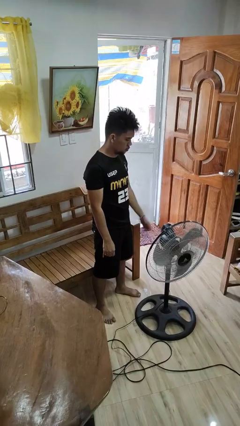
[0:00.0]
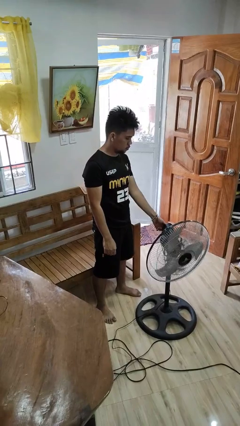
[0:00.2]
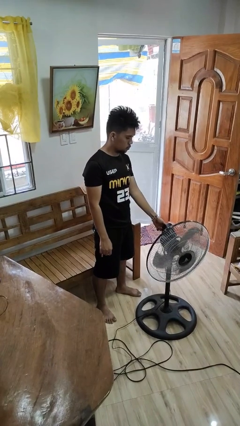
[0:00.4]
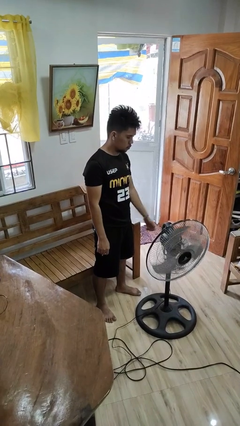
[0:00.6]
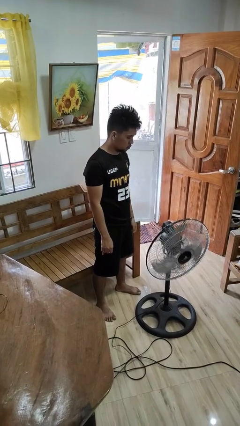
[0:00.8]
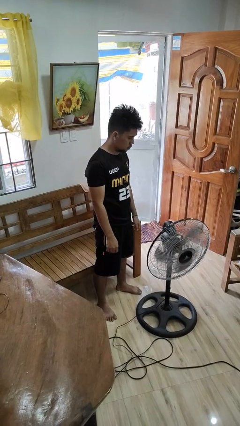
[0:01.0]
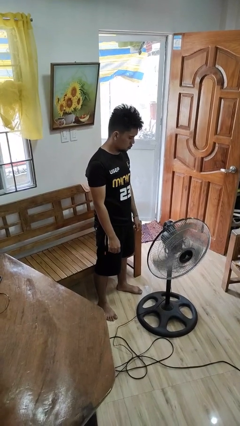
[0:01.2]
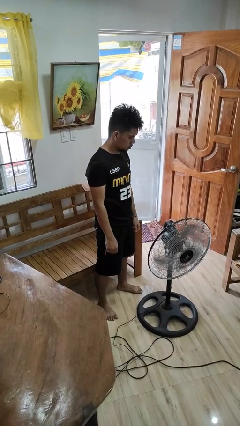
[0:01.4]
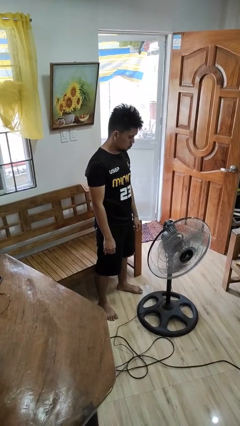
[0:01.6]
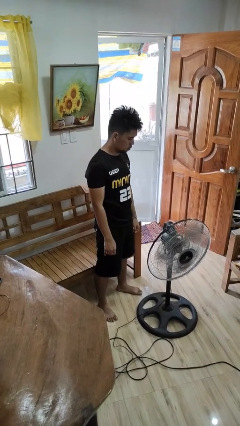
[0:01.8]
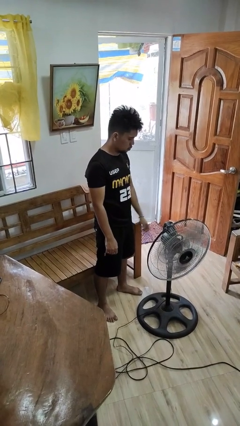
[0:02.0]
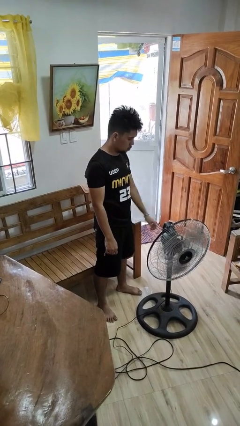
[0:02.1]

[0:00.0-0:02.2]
person turns on fan

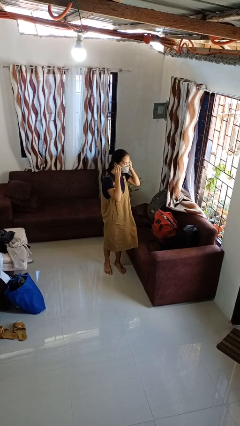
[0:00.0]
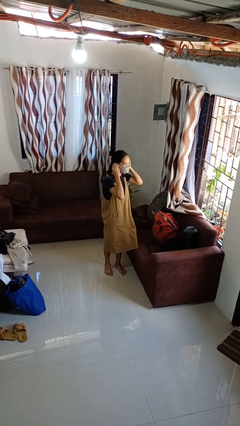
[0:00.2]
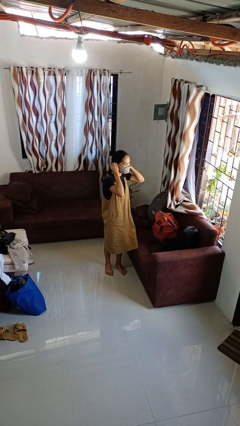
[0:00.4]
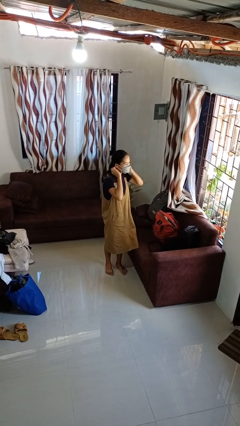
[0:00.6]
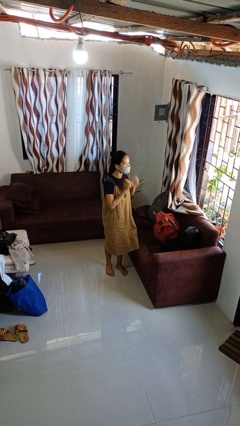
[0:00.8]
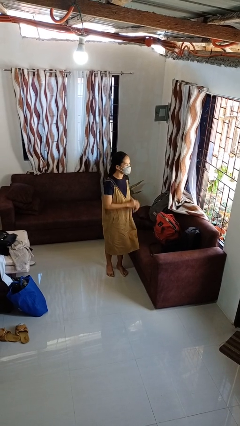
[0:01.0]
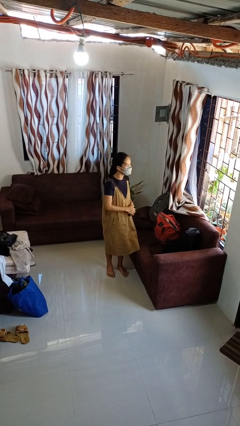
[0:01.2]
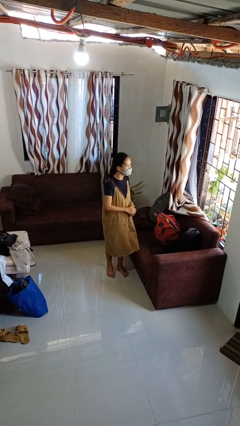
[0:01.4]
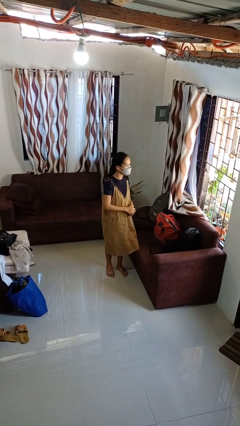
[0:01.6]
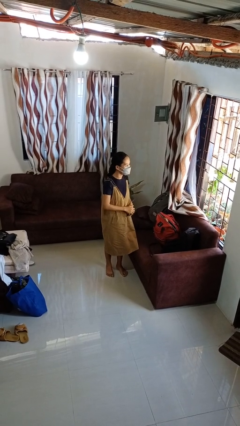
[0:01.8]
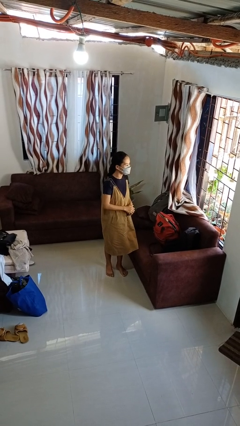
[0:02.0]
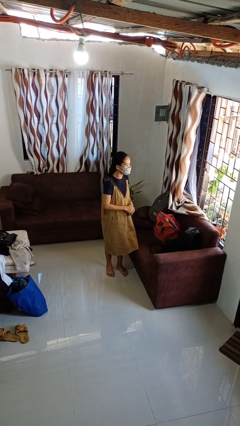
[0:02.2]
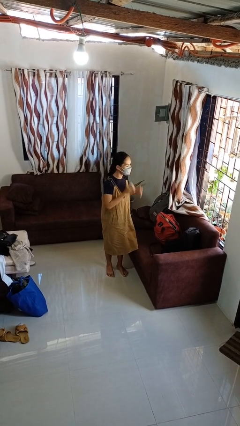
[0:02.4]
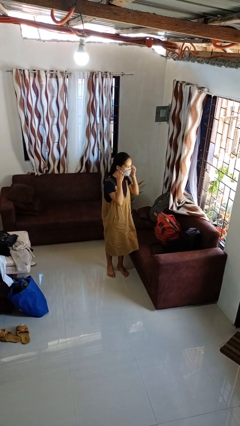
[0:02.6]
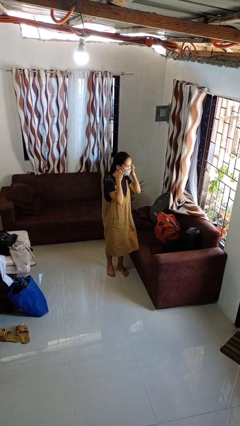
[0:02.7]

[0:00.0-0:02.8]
person puts on facemask

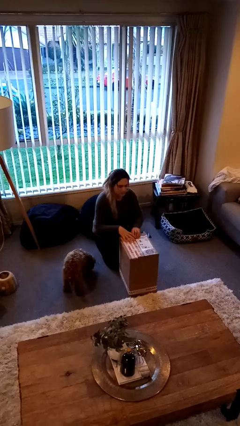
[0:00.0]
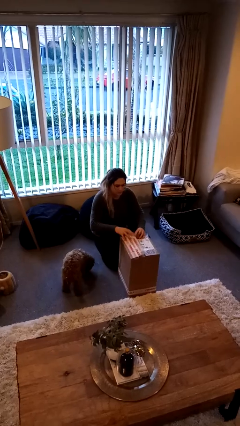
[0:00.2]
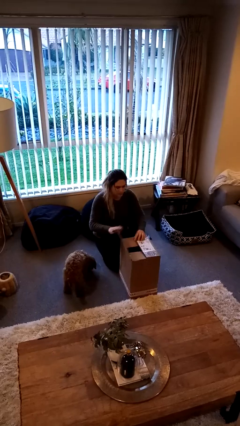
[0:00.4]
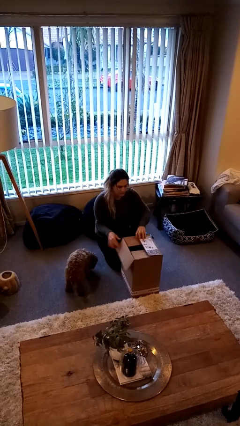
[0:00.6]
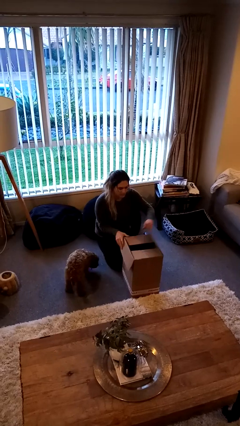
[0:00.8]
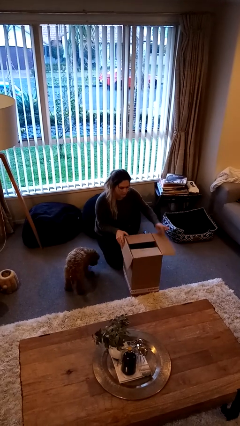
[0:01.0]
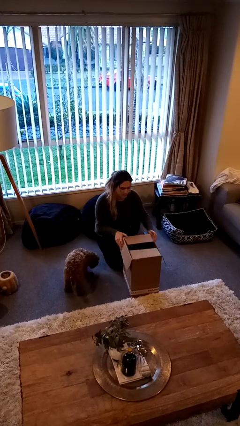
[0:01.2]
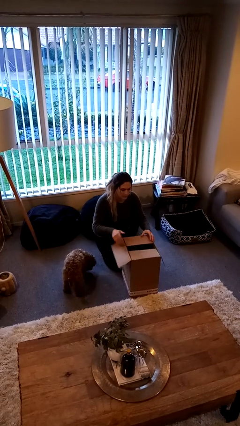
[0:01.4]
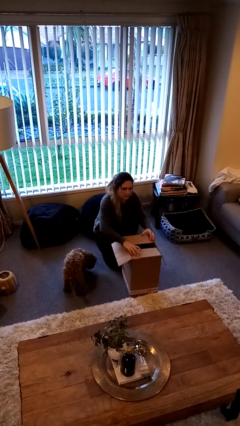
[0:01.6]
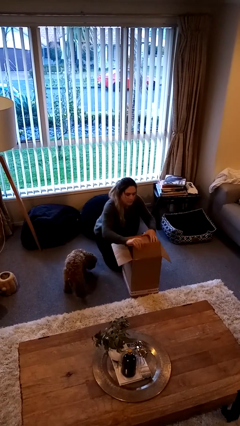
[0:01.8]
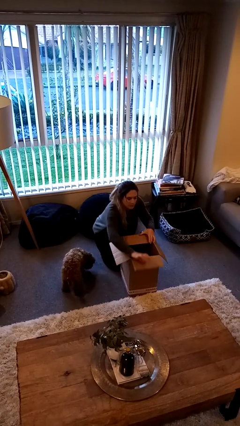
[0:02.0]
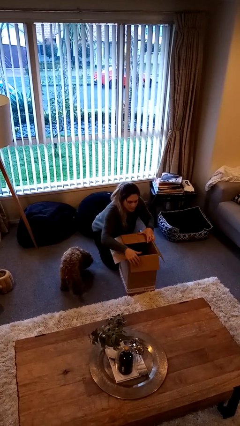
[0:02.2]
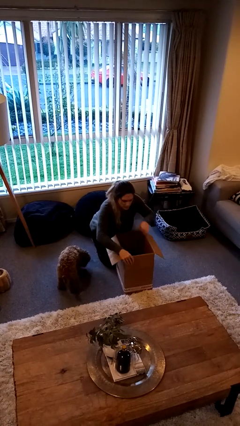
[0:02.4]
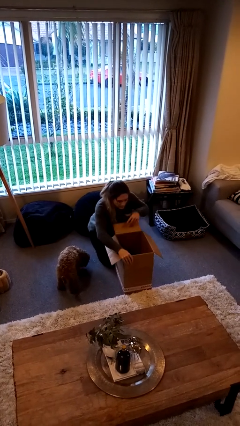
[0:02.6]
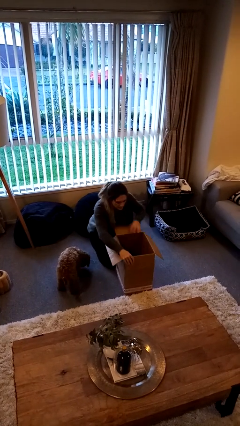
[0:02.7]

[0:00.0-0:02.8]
person opens box

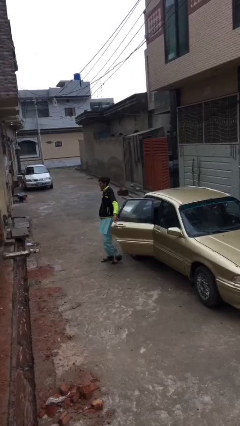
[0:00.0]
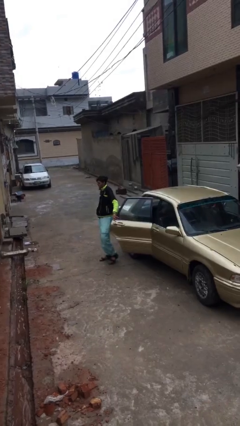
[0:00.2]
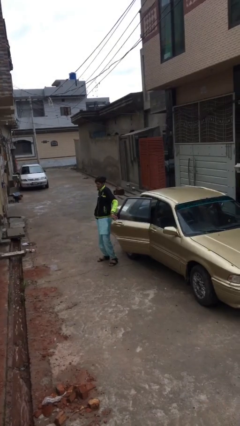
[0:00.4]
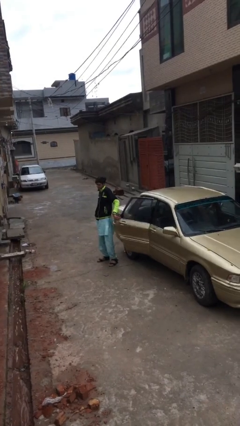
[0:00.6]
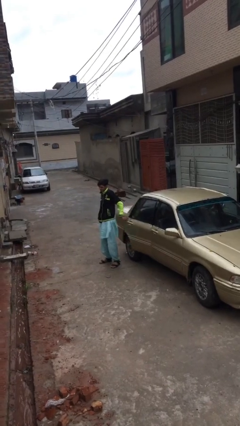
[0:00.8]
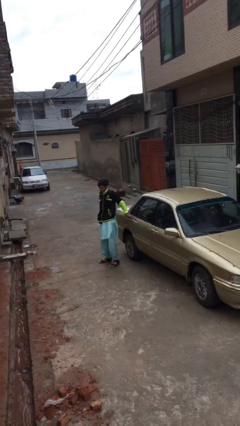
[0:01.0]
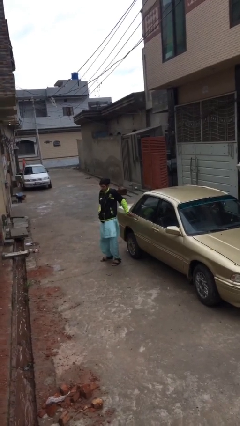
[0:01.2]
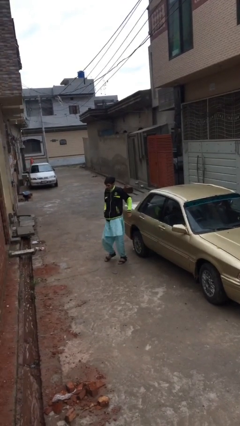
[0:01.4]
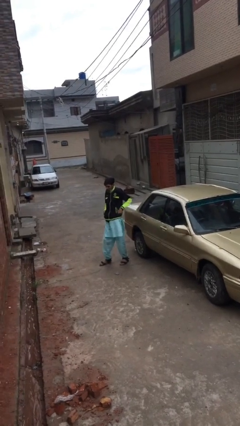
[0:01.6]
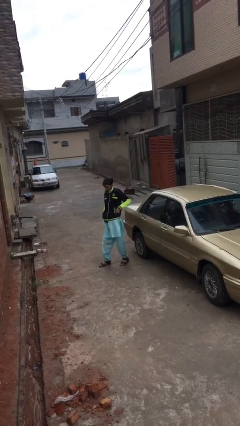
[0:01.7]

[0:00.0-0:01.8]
person closes car door

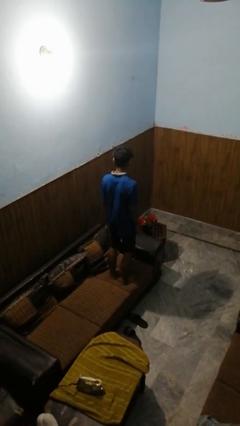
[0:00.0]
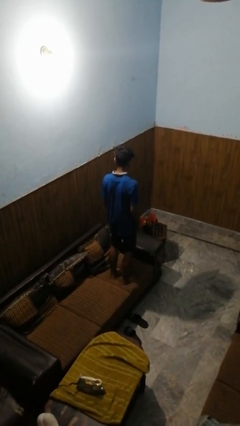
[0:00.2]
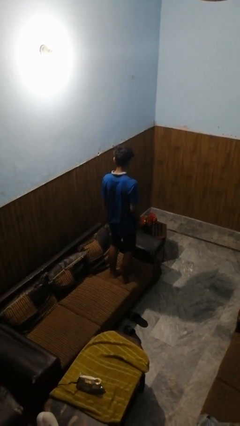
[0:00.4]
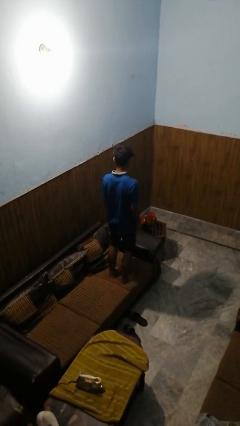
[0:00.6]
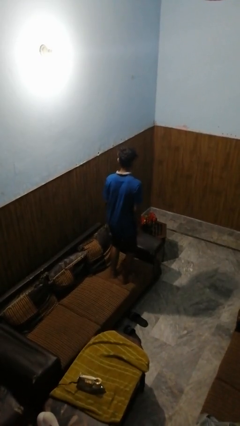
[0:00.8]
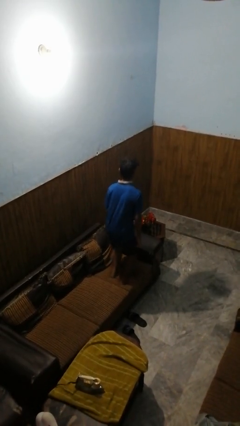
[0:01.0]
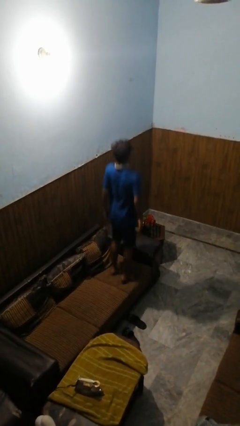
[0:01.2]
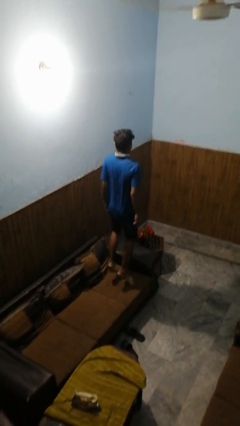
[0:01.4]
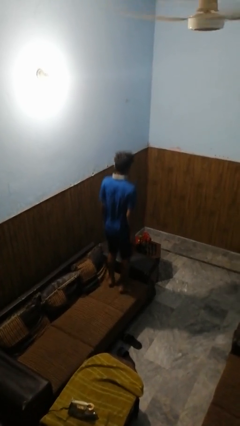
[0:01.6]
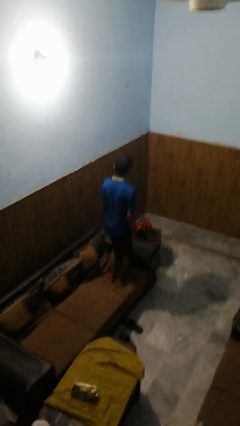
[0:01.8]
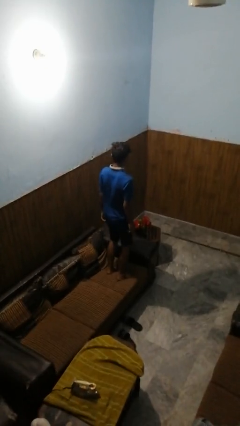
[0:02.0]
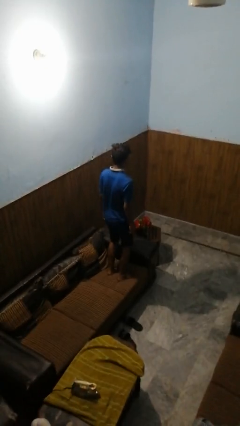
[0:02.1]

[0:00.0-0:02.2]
person jumps on couch

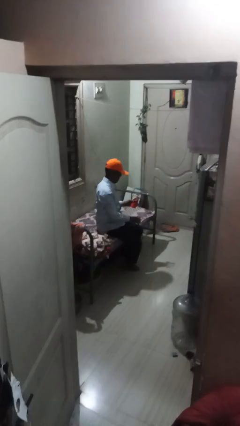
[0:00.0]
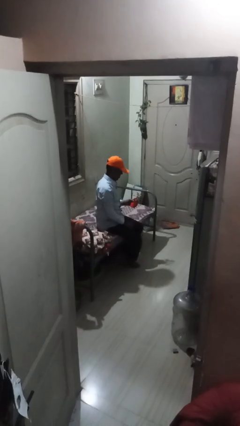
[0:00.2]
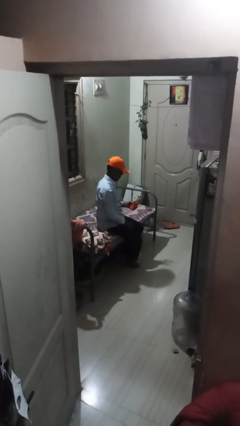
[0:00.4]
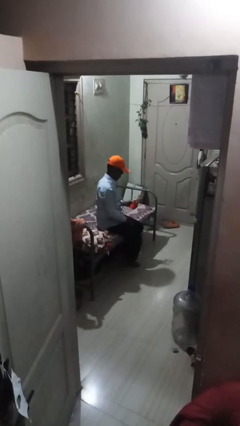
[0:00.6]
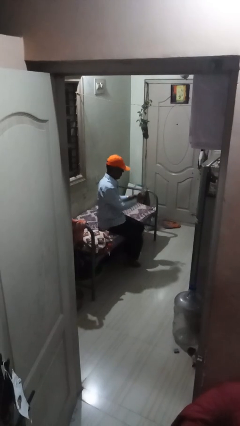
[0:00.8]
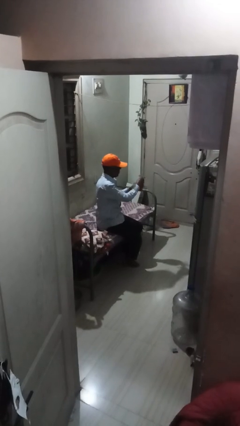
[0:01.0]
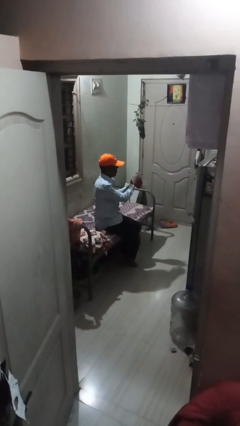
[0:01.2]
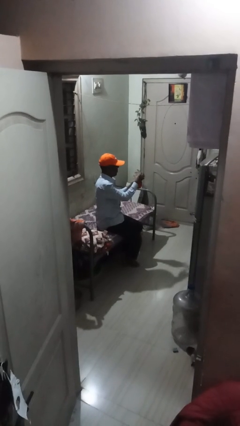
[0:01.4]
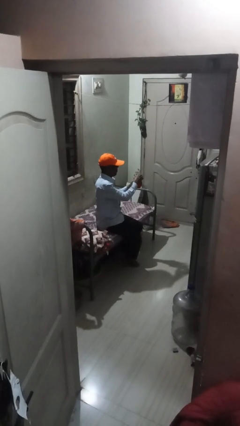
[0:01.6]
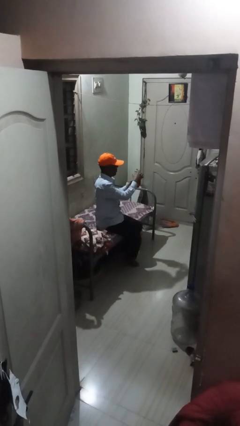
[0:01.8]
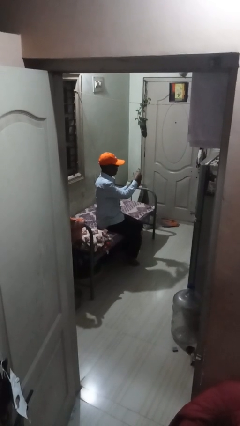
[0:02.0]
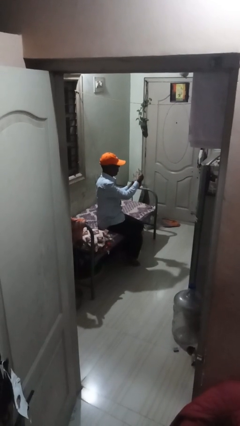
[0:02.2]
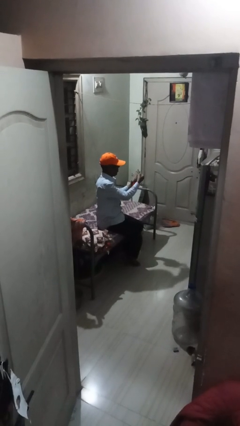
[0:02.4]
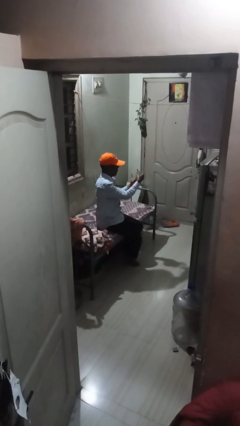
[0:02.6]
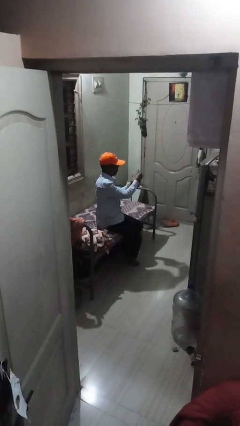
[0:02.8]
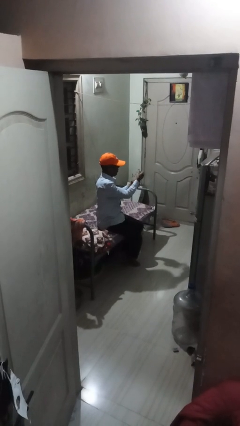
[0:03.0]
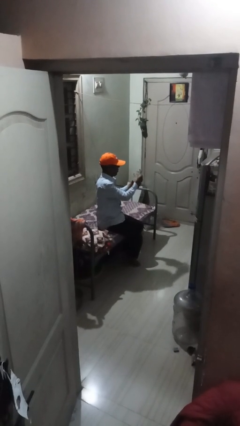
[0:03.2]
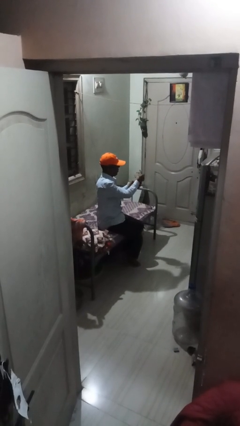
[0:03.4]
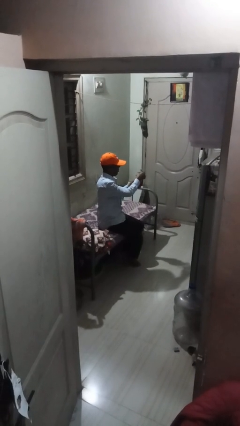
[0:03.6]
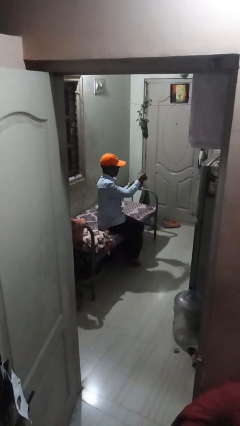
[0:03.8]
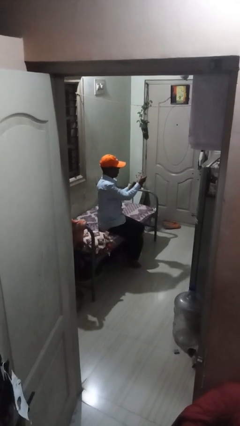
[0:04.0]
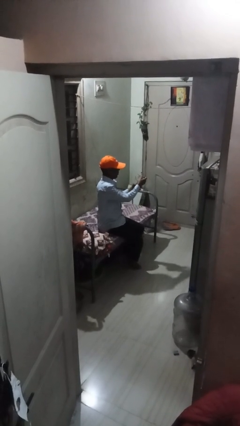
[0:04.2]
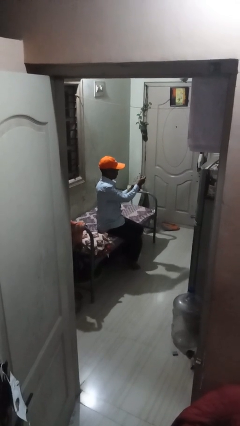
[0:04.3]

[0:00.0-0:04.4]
person arranges flowers in vase

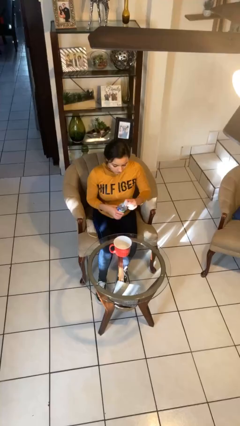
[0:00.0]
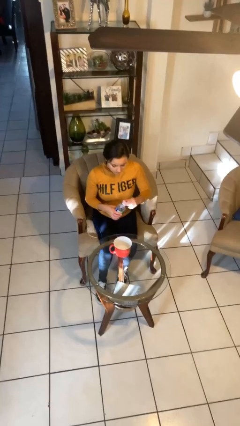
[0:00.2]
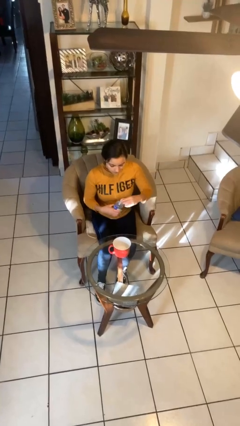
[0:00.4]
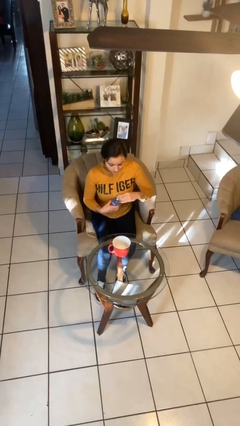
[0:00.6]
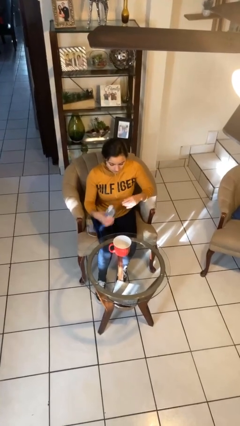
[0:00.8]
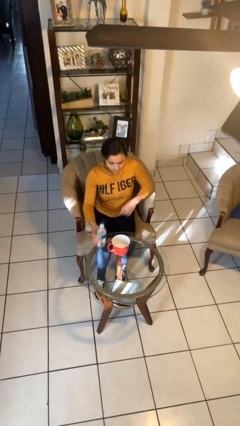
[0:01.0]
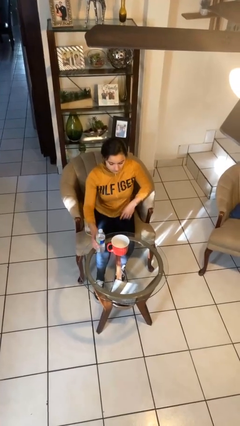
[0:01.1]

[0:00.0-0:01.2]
person screws lid to bottle
